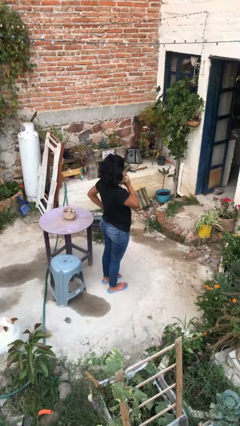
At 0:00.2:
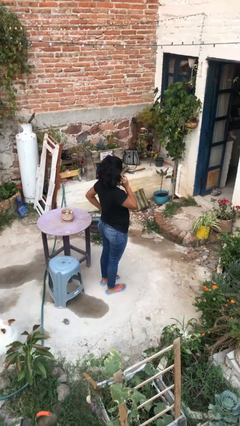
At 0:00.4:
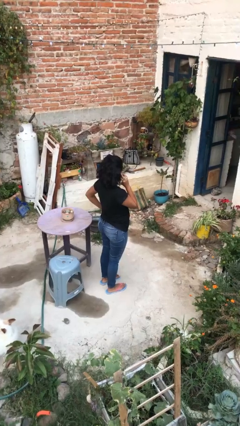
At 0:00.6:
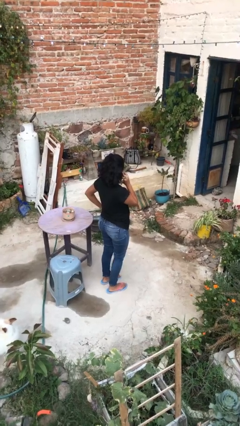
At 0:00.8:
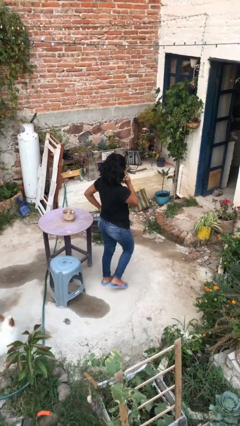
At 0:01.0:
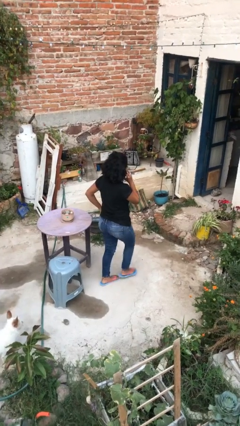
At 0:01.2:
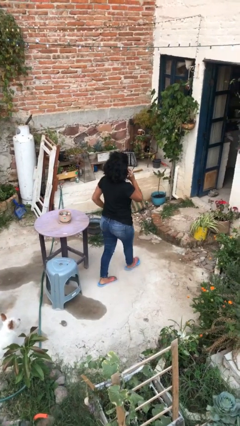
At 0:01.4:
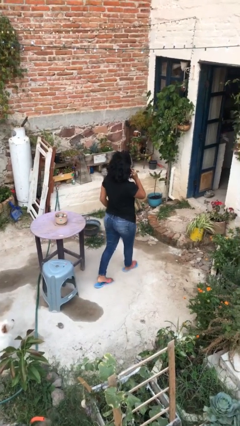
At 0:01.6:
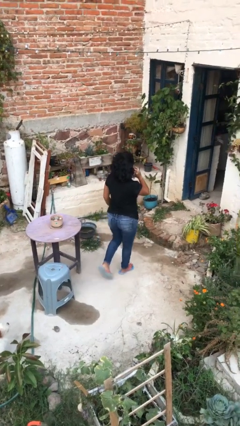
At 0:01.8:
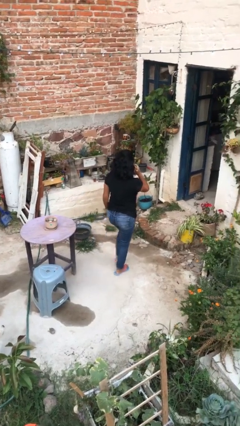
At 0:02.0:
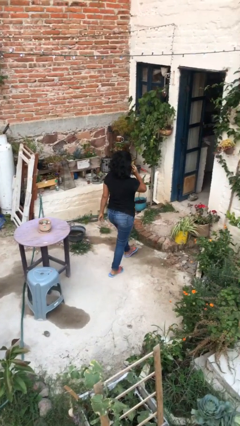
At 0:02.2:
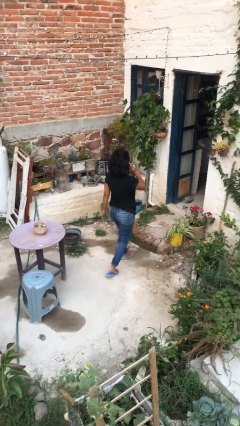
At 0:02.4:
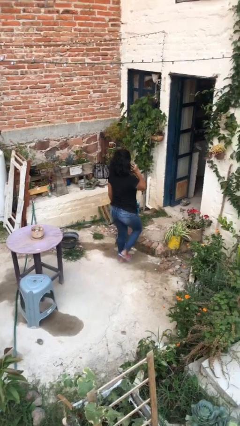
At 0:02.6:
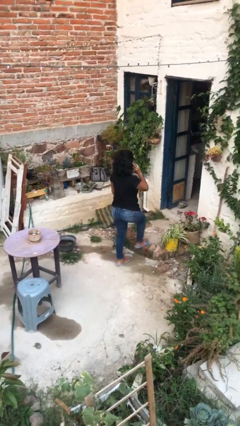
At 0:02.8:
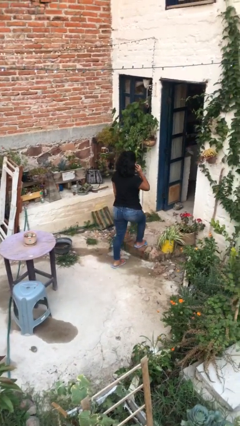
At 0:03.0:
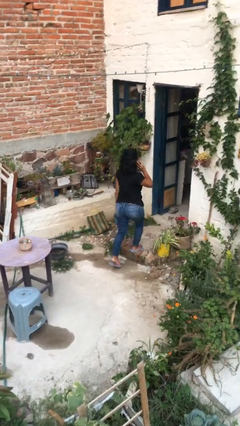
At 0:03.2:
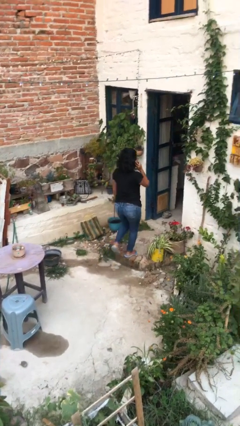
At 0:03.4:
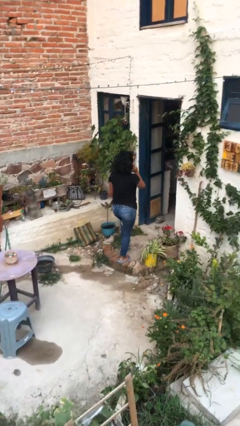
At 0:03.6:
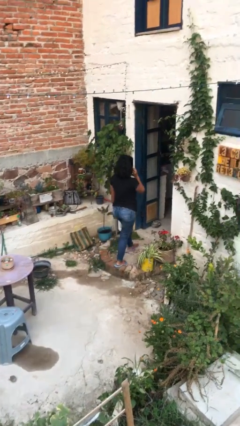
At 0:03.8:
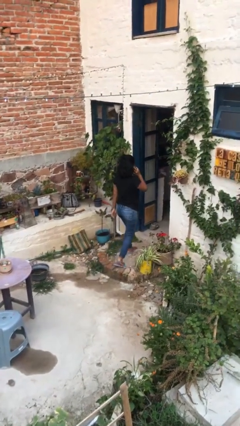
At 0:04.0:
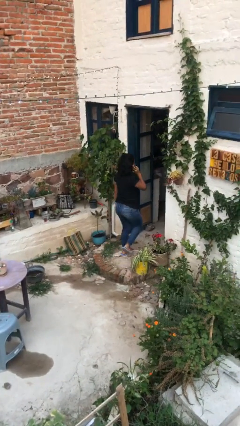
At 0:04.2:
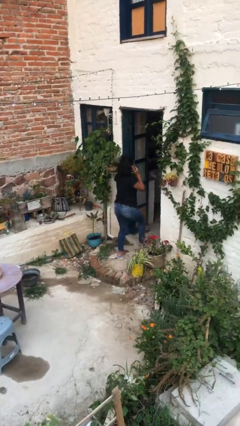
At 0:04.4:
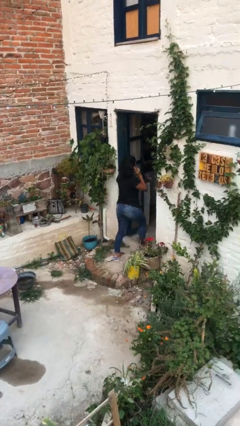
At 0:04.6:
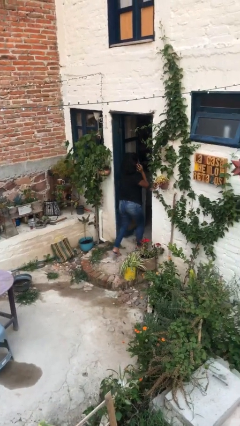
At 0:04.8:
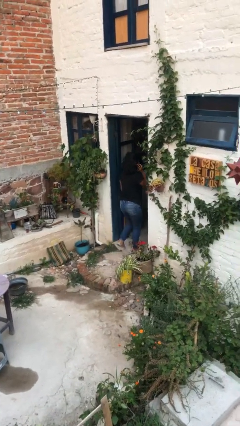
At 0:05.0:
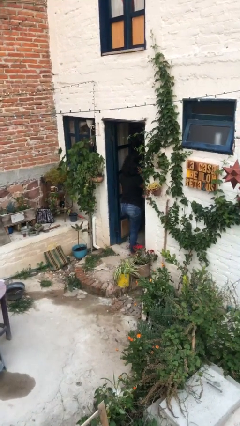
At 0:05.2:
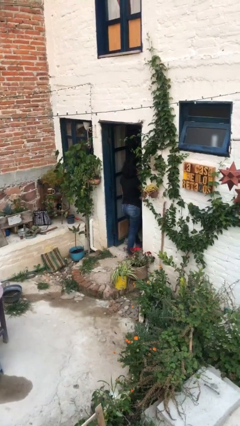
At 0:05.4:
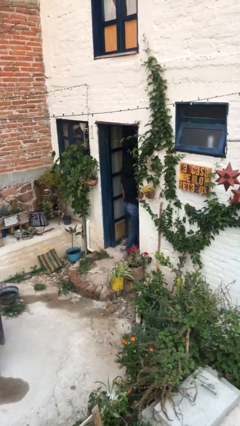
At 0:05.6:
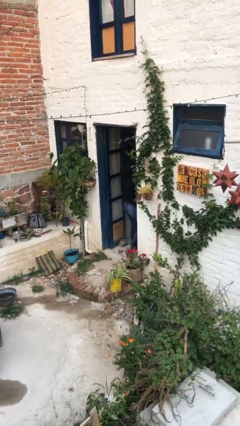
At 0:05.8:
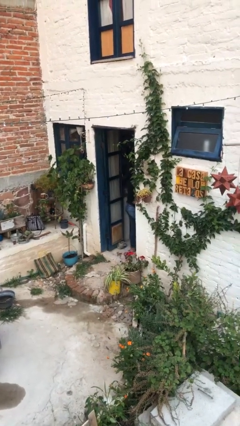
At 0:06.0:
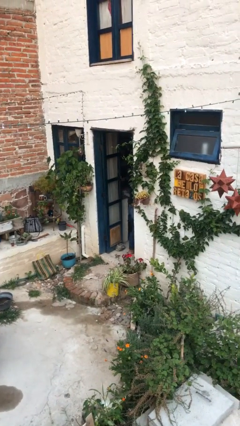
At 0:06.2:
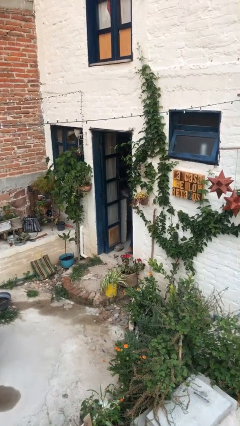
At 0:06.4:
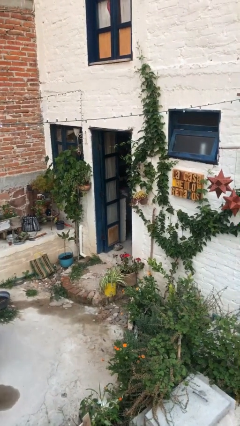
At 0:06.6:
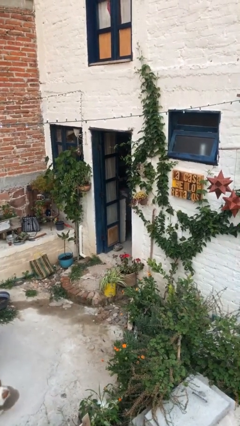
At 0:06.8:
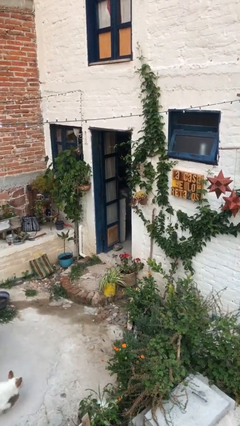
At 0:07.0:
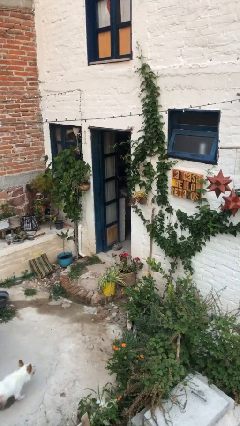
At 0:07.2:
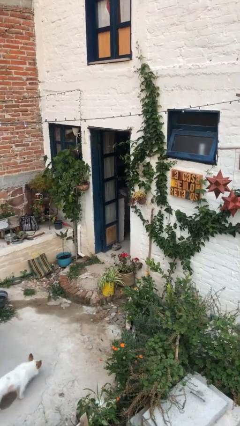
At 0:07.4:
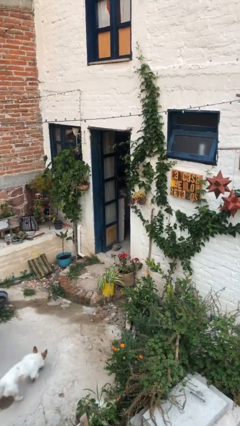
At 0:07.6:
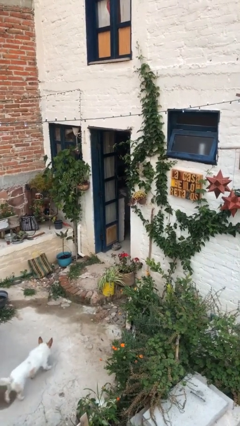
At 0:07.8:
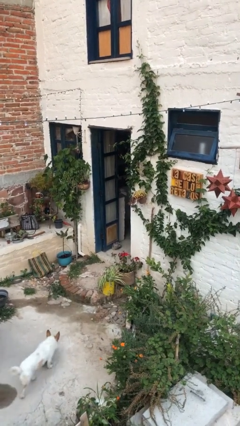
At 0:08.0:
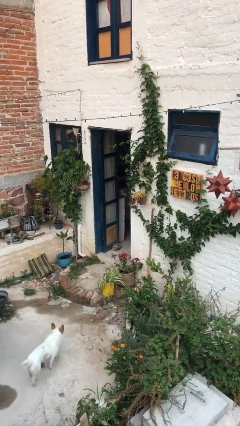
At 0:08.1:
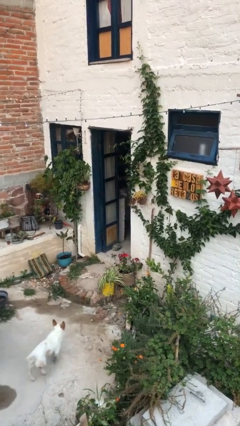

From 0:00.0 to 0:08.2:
person exits scene through structure

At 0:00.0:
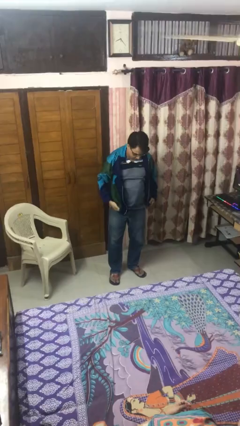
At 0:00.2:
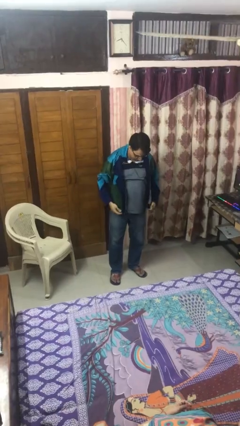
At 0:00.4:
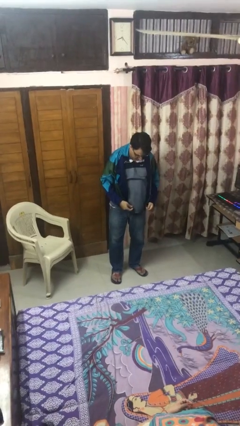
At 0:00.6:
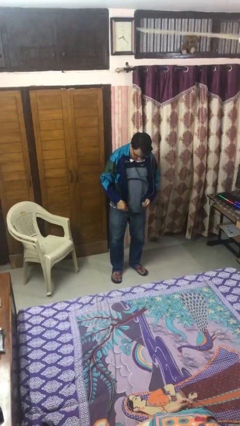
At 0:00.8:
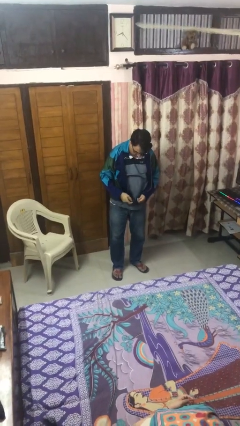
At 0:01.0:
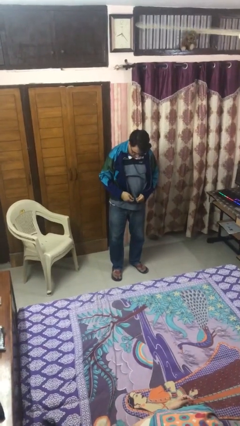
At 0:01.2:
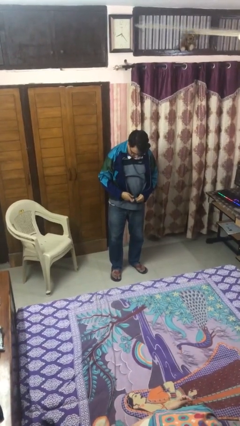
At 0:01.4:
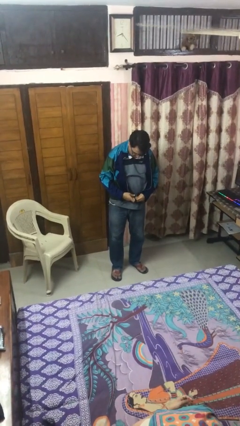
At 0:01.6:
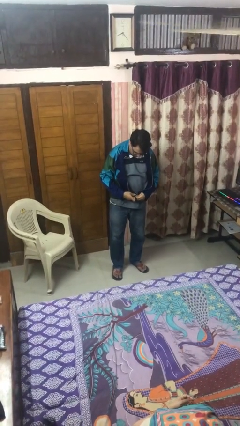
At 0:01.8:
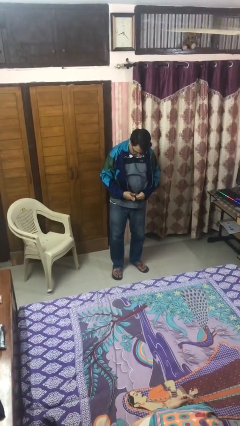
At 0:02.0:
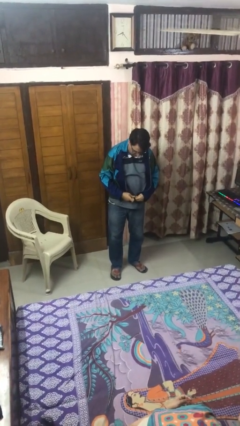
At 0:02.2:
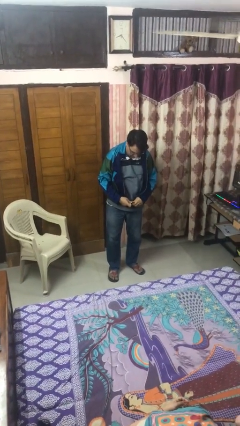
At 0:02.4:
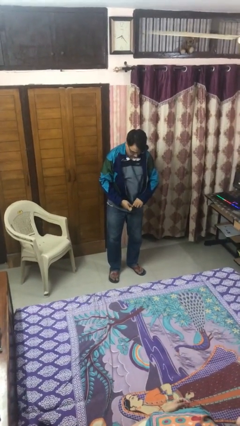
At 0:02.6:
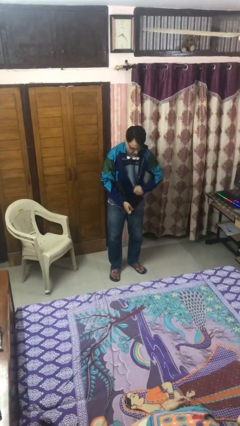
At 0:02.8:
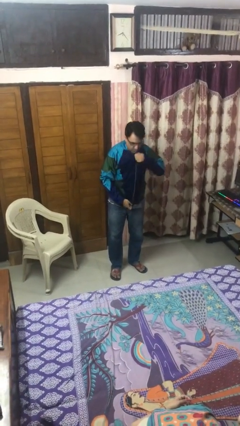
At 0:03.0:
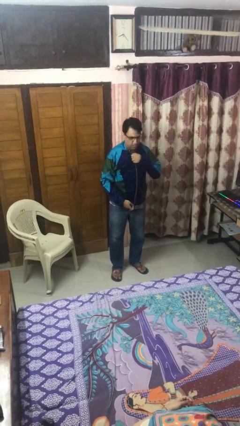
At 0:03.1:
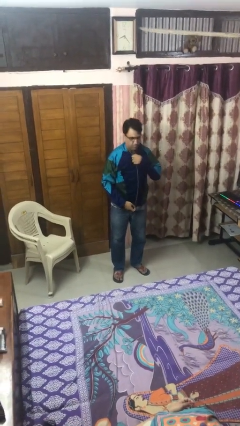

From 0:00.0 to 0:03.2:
person zips up jacket

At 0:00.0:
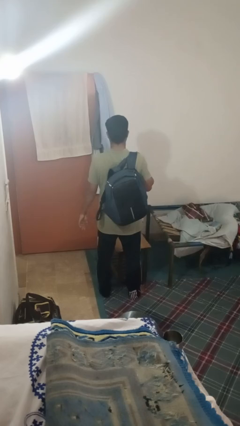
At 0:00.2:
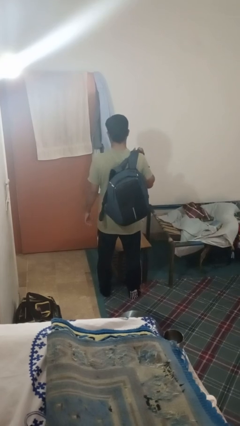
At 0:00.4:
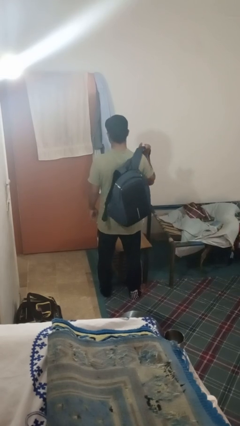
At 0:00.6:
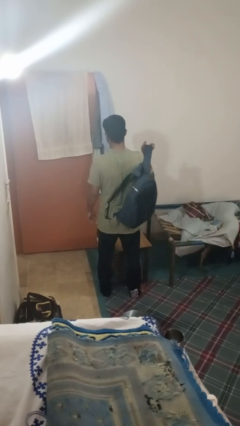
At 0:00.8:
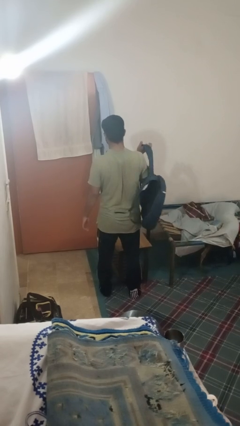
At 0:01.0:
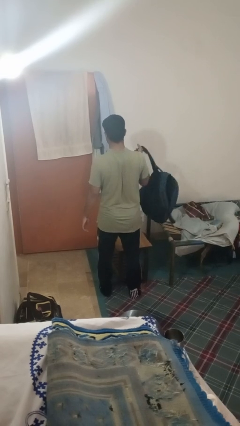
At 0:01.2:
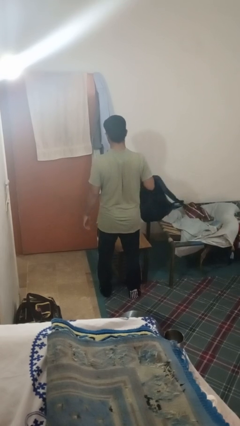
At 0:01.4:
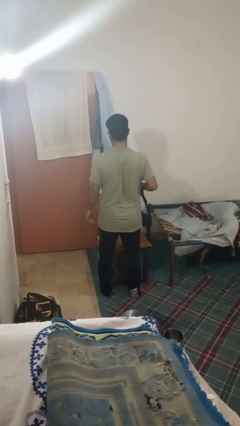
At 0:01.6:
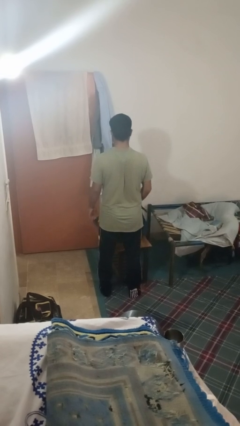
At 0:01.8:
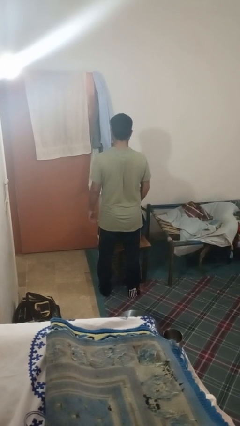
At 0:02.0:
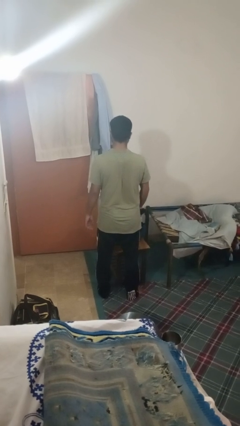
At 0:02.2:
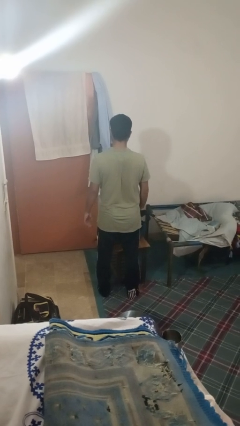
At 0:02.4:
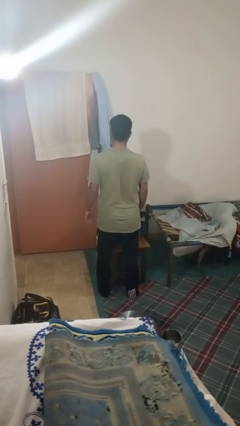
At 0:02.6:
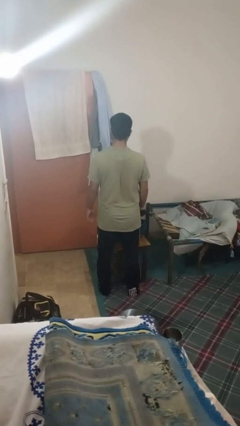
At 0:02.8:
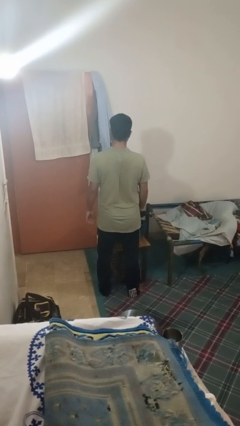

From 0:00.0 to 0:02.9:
person takes off backpack

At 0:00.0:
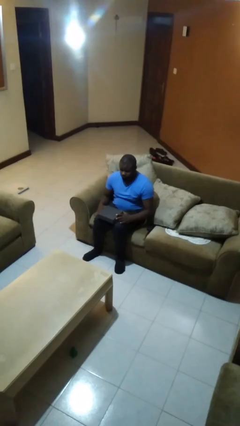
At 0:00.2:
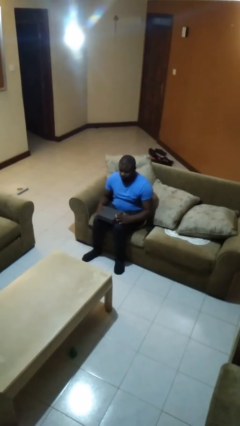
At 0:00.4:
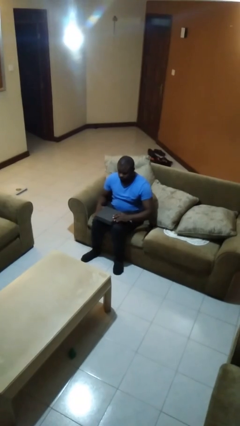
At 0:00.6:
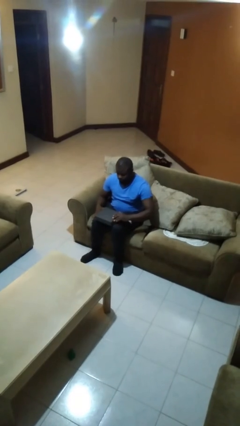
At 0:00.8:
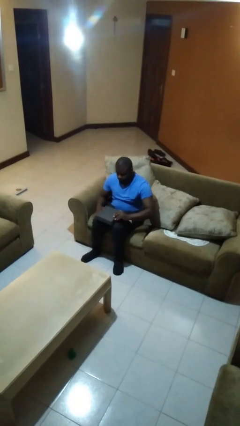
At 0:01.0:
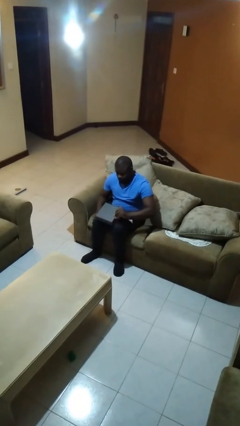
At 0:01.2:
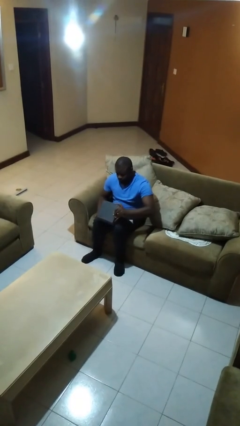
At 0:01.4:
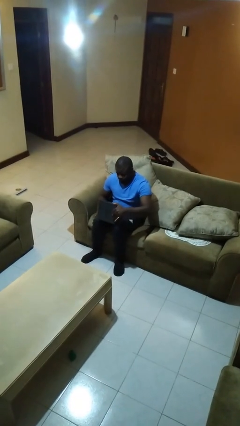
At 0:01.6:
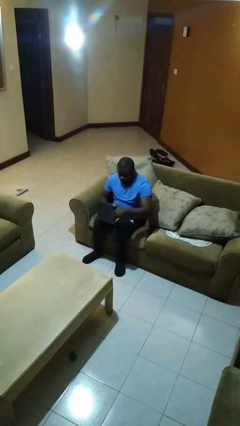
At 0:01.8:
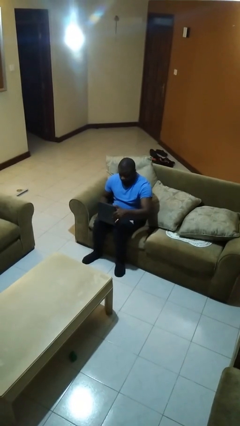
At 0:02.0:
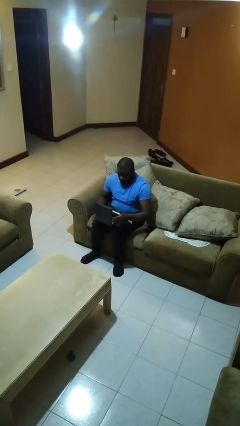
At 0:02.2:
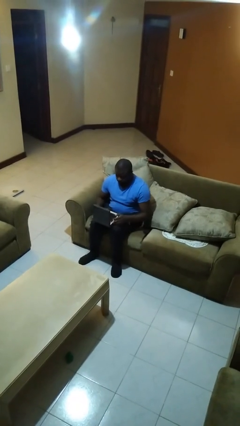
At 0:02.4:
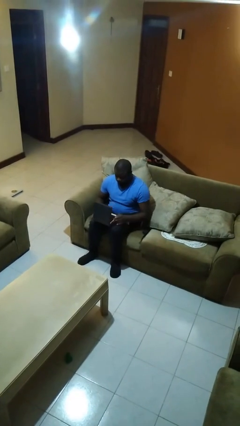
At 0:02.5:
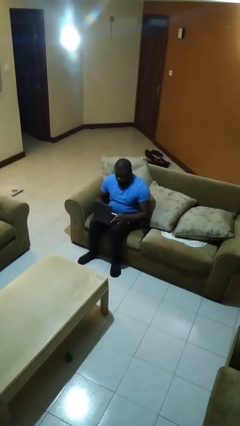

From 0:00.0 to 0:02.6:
person opens jewelry box

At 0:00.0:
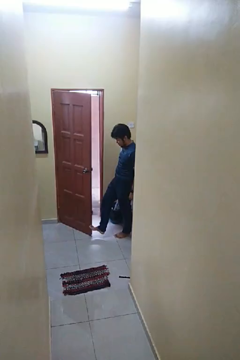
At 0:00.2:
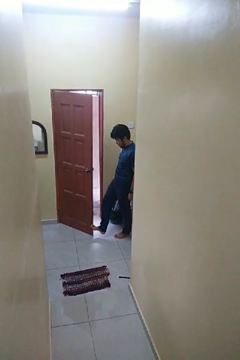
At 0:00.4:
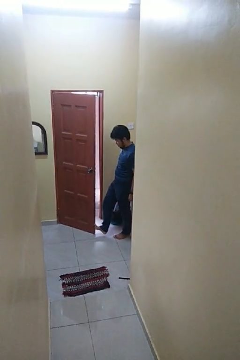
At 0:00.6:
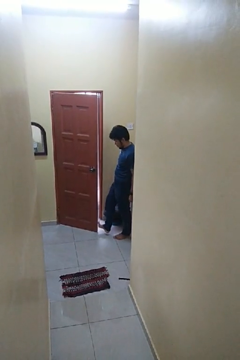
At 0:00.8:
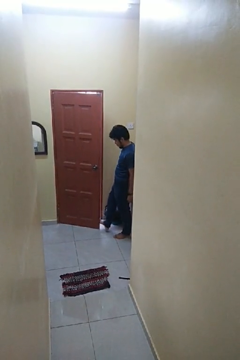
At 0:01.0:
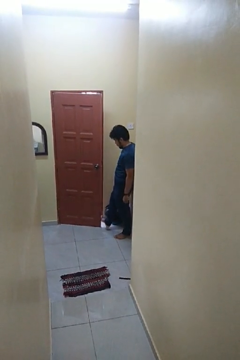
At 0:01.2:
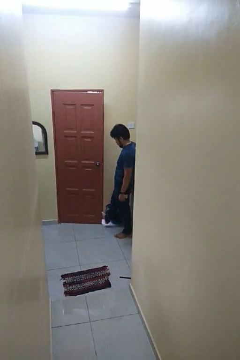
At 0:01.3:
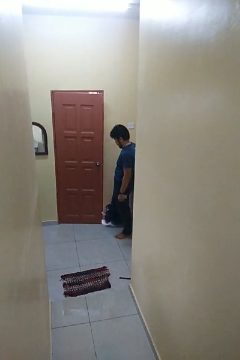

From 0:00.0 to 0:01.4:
person closes door with foot
